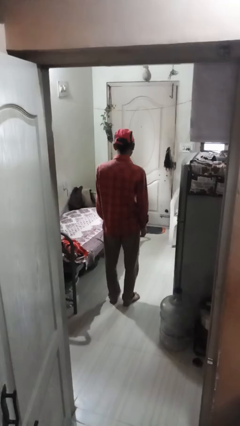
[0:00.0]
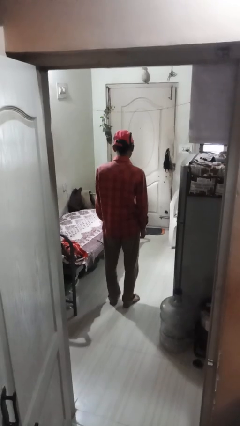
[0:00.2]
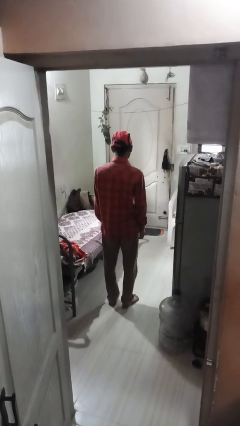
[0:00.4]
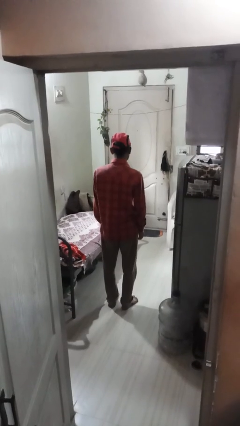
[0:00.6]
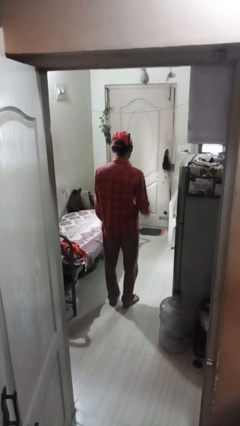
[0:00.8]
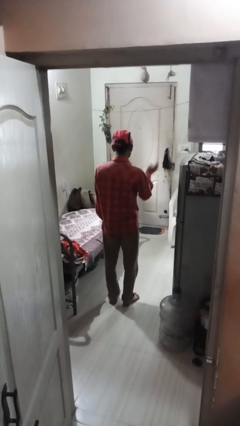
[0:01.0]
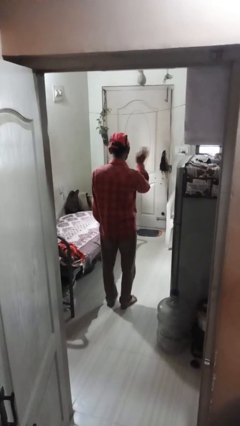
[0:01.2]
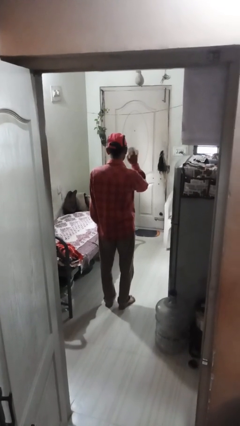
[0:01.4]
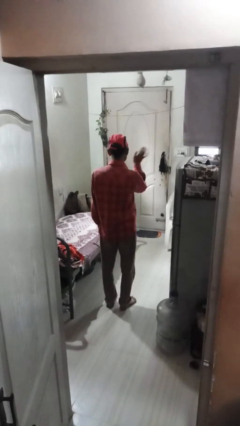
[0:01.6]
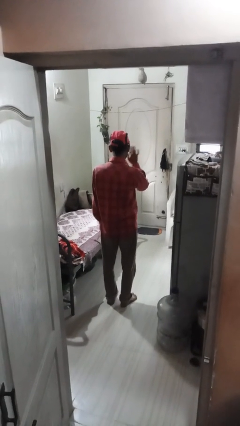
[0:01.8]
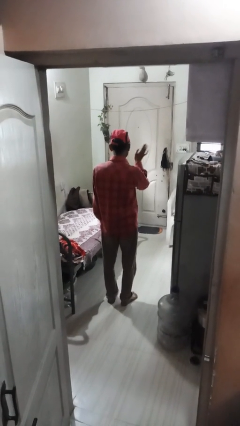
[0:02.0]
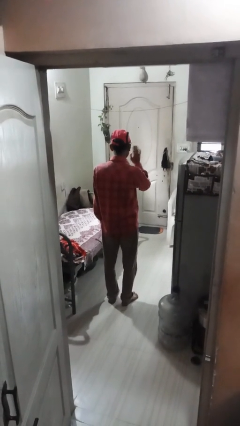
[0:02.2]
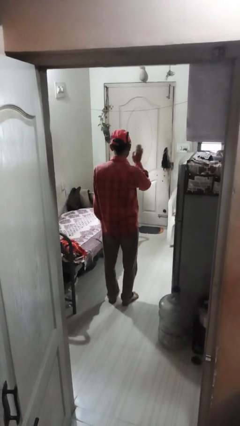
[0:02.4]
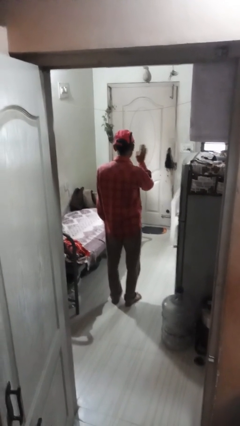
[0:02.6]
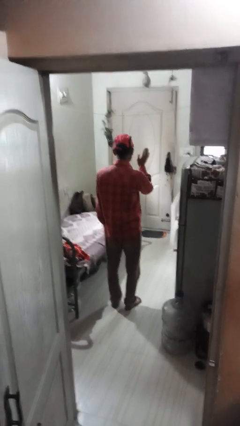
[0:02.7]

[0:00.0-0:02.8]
person waves at person

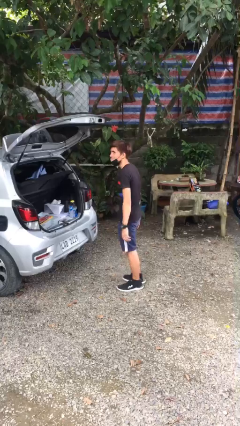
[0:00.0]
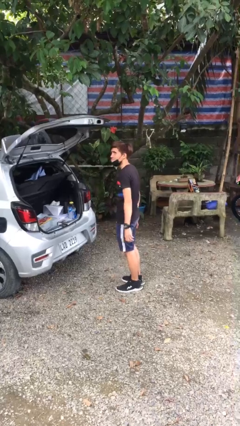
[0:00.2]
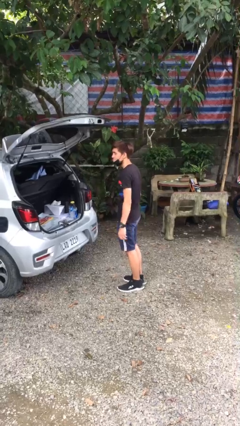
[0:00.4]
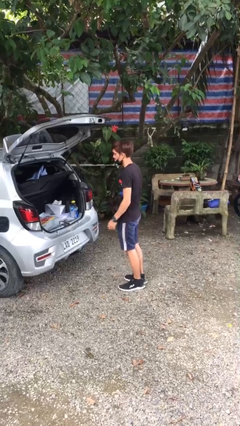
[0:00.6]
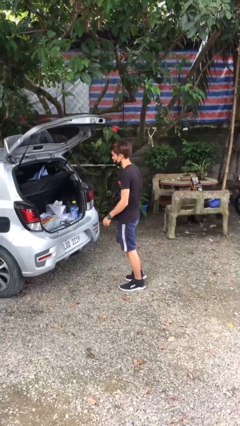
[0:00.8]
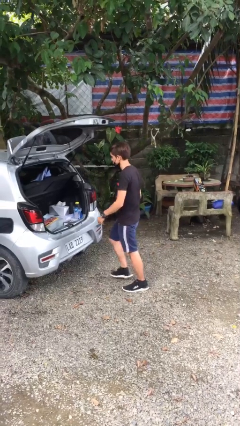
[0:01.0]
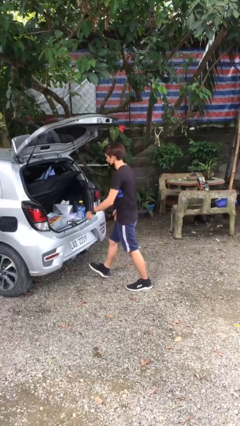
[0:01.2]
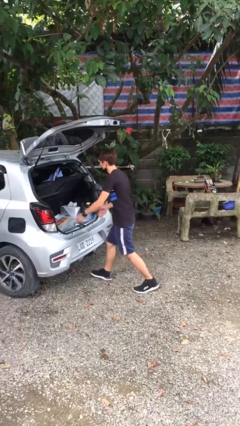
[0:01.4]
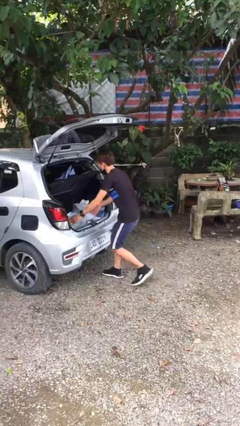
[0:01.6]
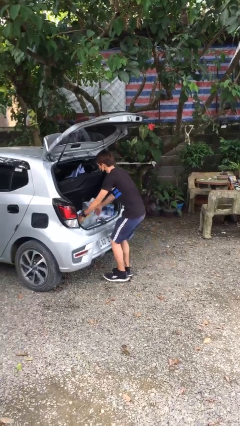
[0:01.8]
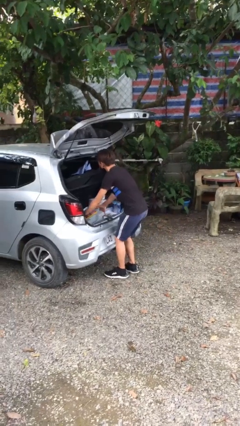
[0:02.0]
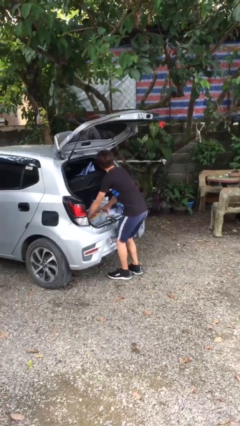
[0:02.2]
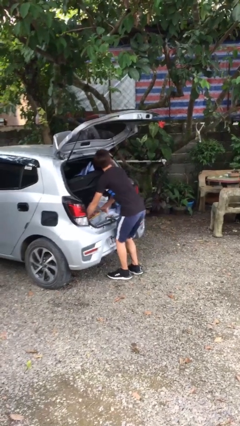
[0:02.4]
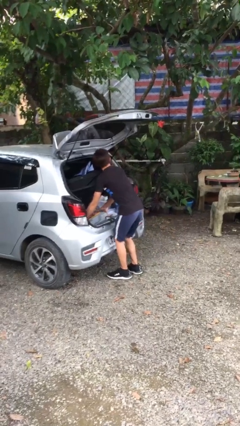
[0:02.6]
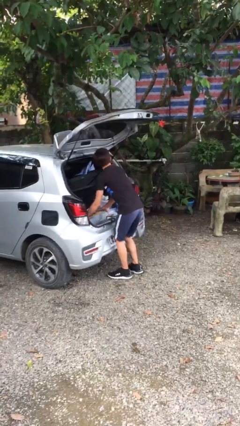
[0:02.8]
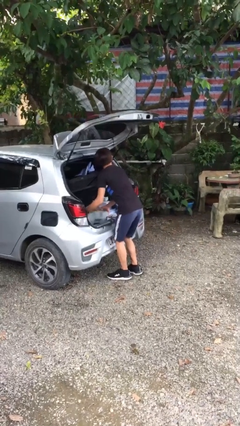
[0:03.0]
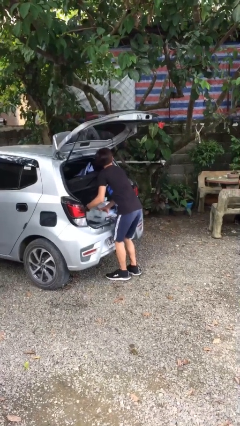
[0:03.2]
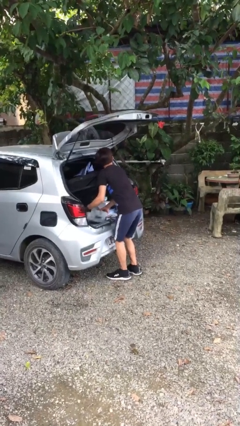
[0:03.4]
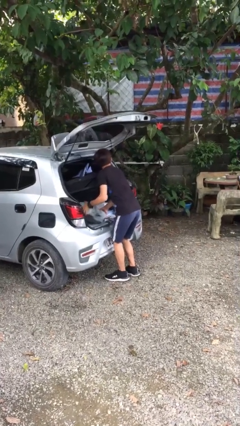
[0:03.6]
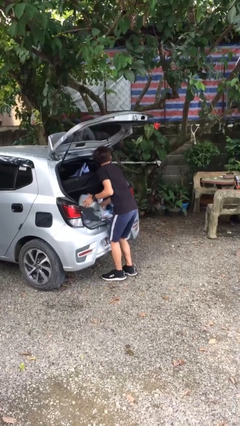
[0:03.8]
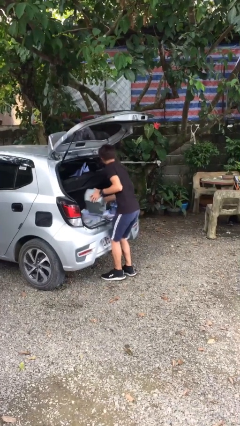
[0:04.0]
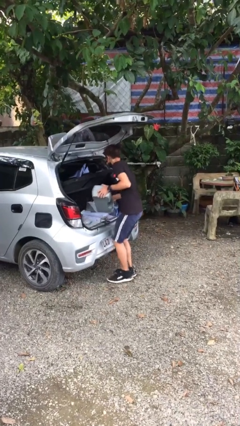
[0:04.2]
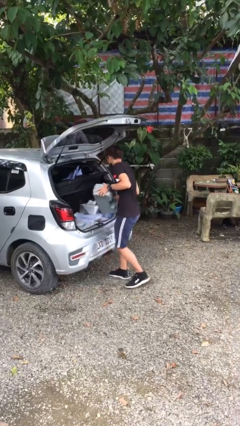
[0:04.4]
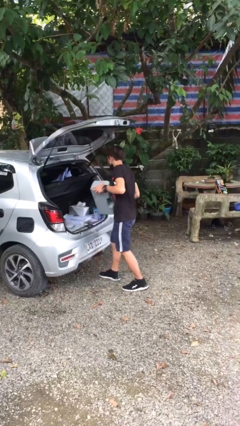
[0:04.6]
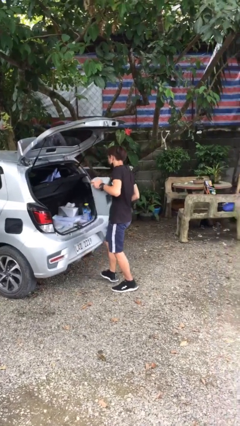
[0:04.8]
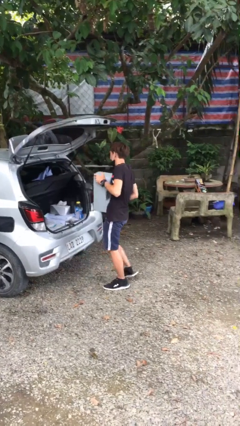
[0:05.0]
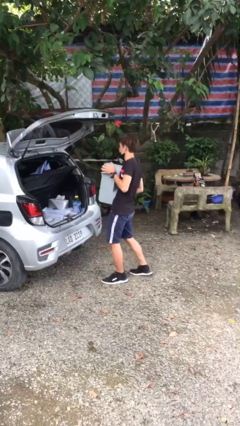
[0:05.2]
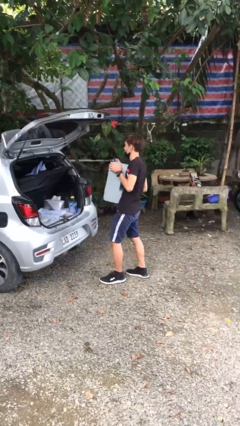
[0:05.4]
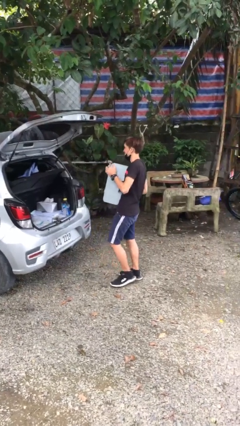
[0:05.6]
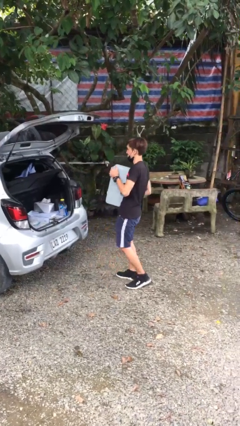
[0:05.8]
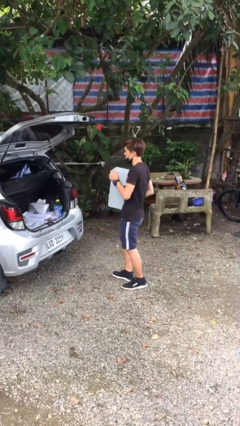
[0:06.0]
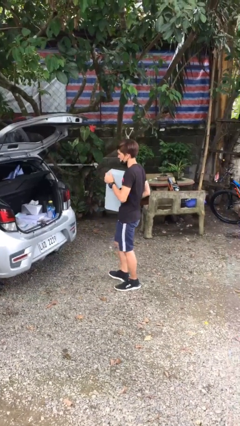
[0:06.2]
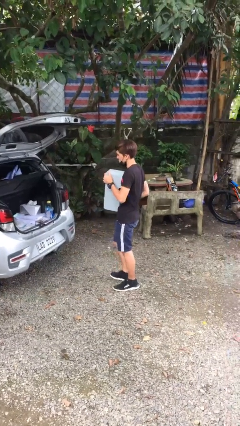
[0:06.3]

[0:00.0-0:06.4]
person unloads car

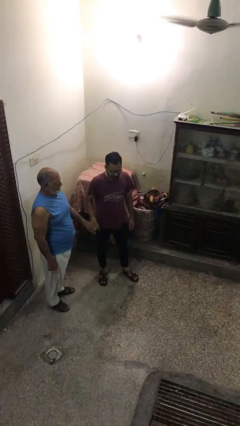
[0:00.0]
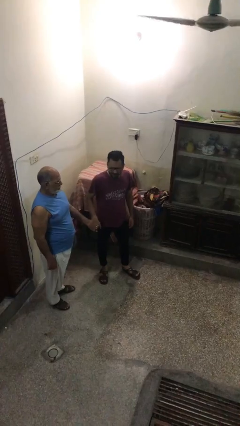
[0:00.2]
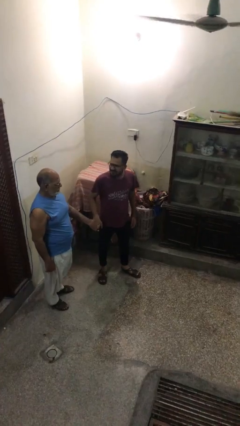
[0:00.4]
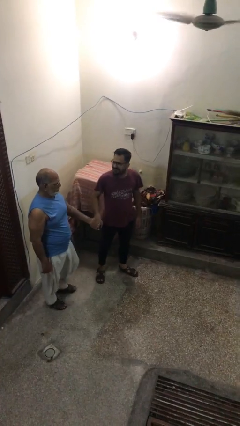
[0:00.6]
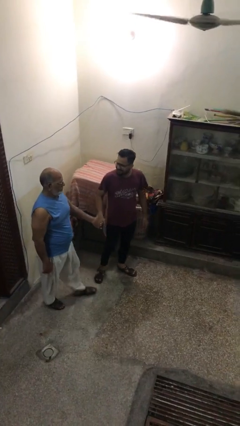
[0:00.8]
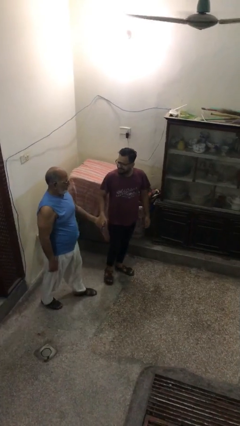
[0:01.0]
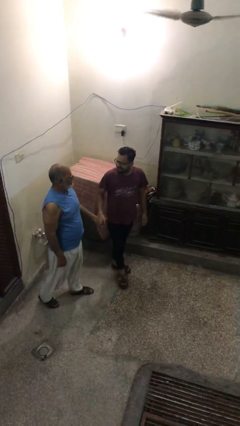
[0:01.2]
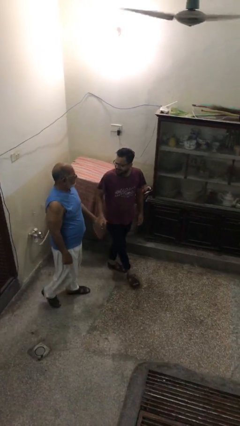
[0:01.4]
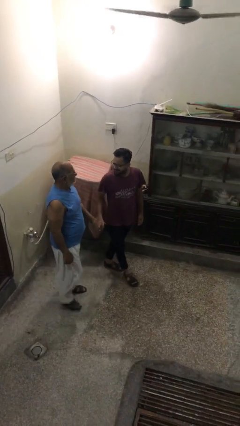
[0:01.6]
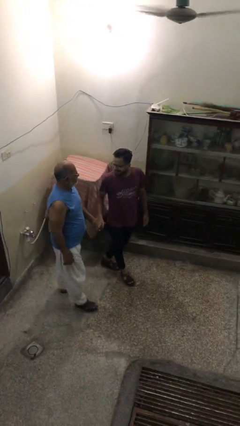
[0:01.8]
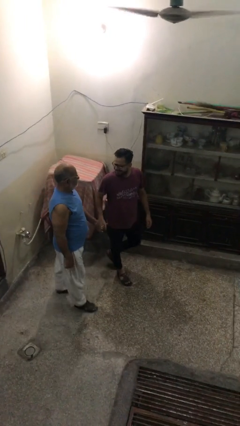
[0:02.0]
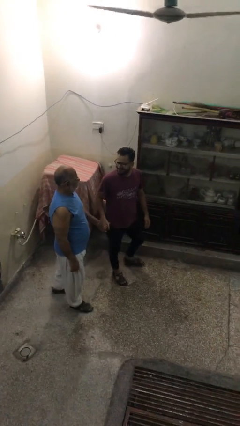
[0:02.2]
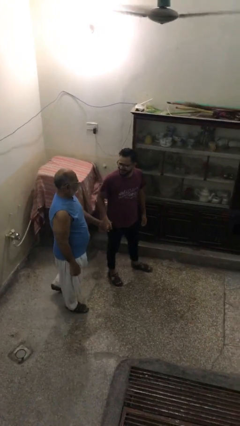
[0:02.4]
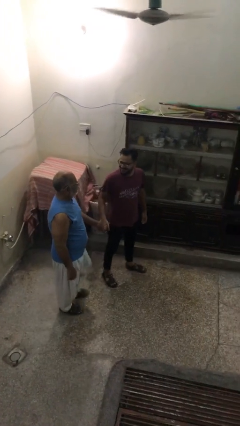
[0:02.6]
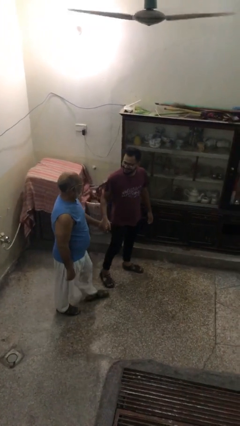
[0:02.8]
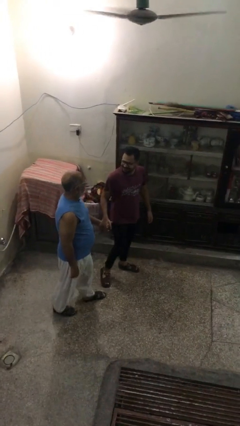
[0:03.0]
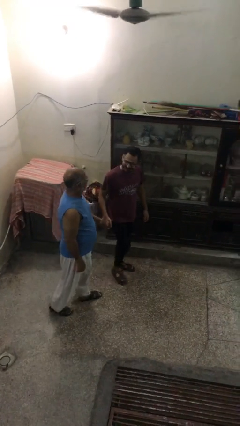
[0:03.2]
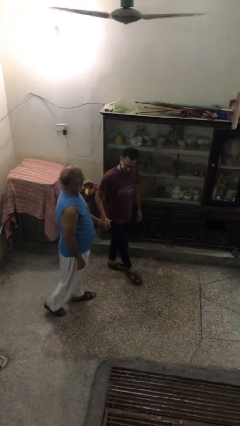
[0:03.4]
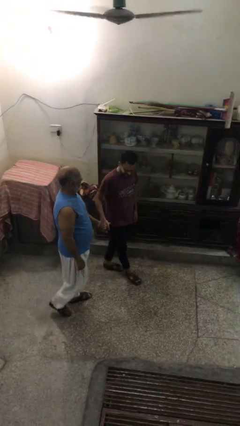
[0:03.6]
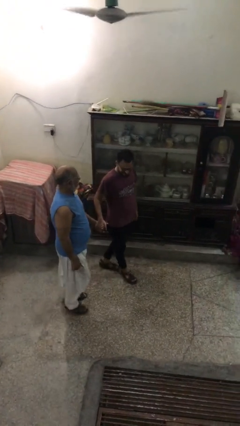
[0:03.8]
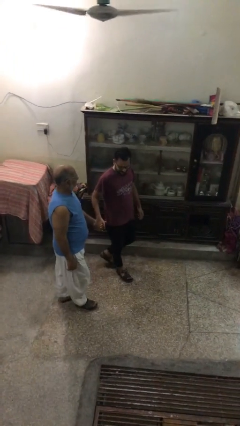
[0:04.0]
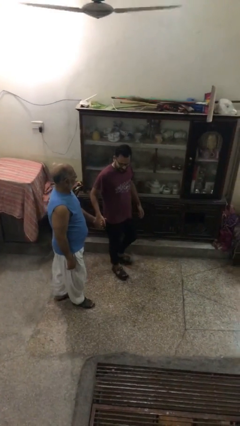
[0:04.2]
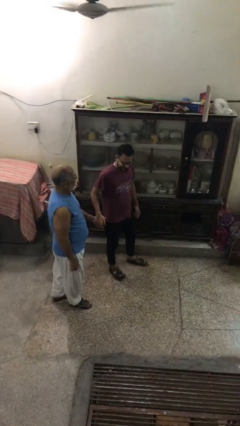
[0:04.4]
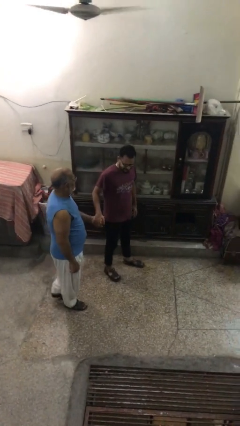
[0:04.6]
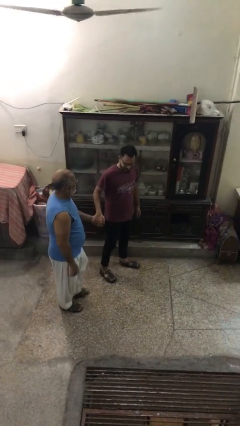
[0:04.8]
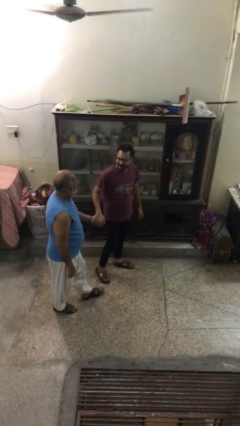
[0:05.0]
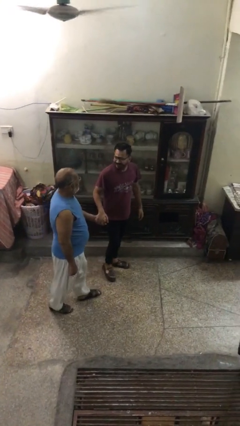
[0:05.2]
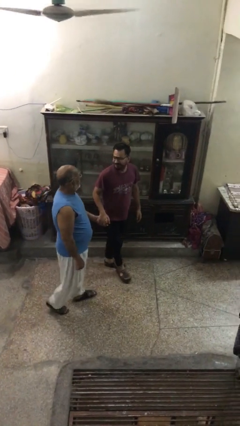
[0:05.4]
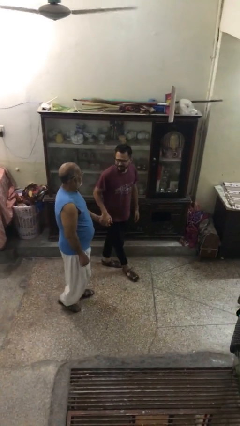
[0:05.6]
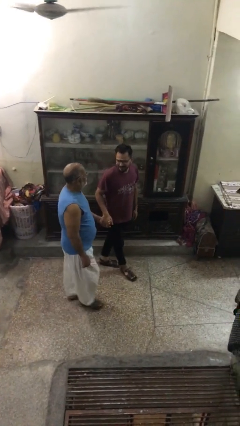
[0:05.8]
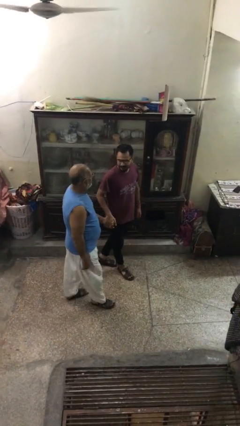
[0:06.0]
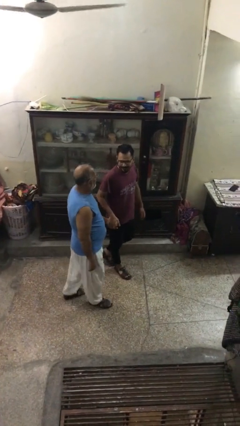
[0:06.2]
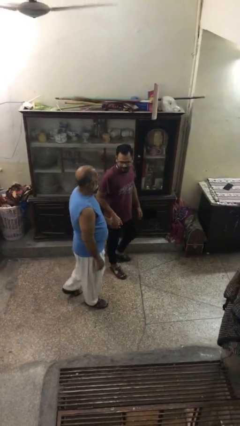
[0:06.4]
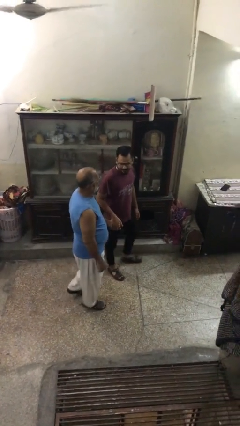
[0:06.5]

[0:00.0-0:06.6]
person holds hand

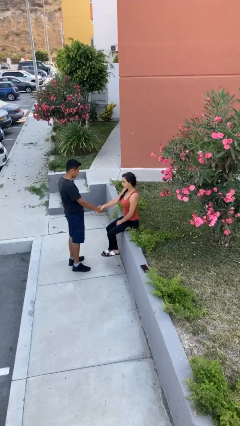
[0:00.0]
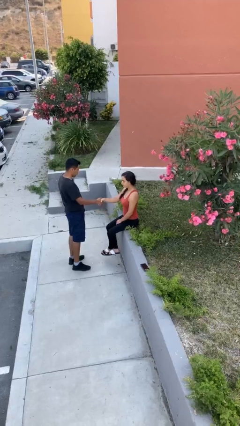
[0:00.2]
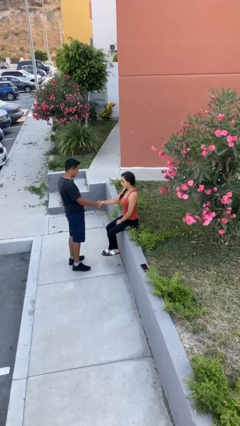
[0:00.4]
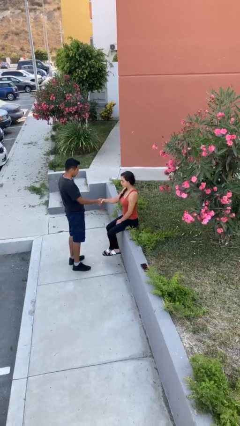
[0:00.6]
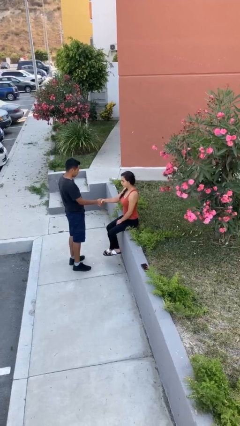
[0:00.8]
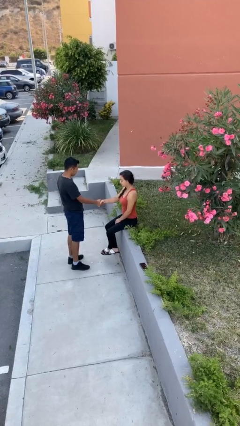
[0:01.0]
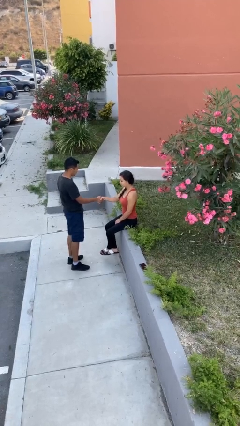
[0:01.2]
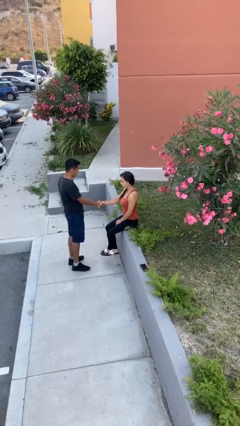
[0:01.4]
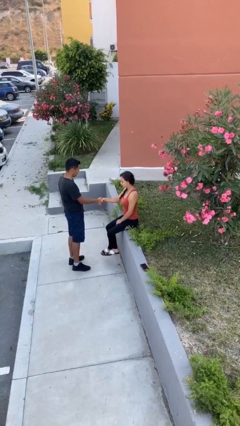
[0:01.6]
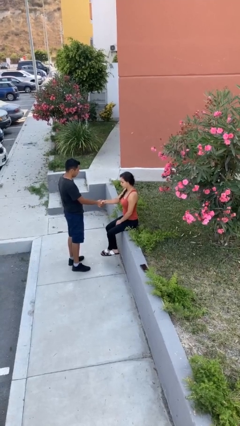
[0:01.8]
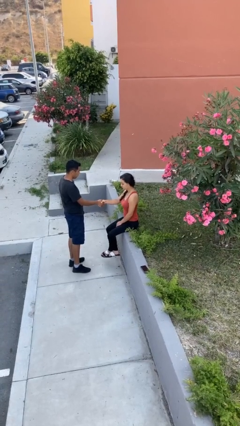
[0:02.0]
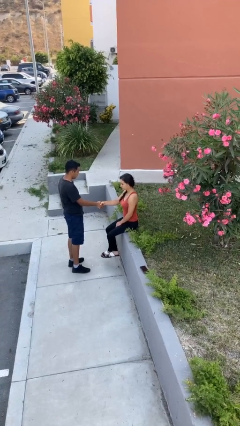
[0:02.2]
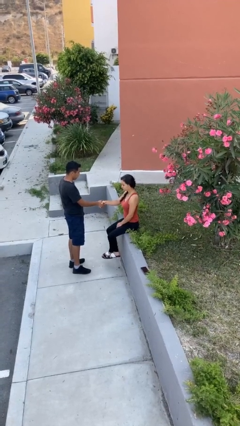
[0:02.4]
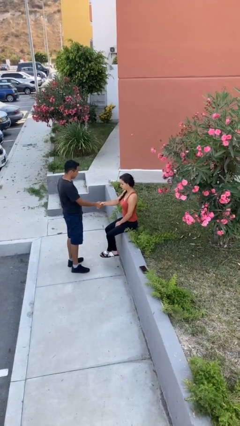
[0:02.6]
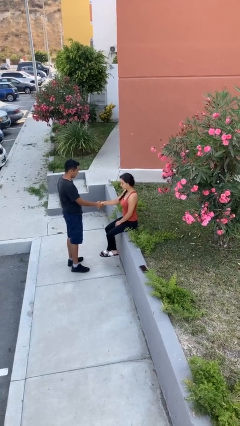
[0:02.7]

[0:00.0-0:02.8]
person shakes hand
